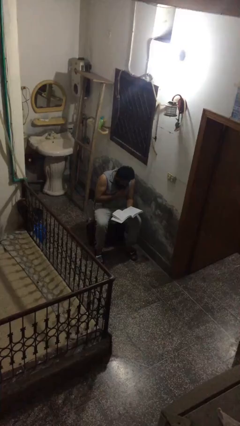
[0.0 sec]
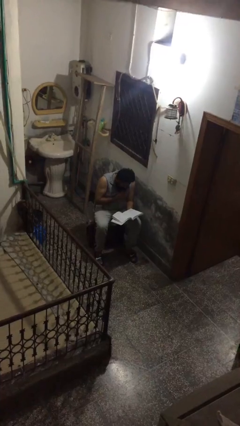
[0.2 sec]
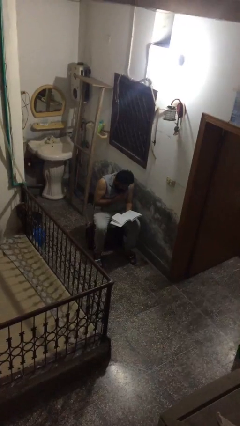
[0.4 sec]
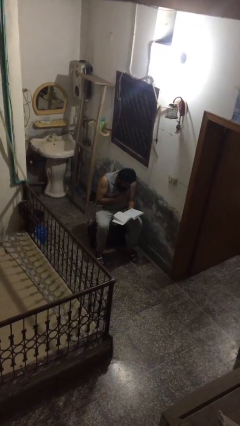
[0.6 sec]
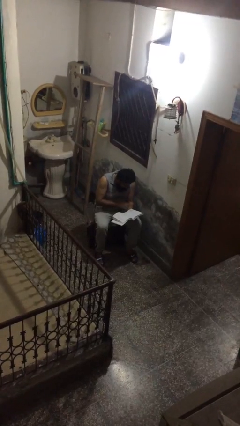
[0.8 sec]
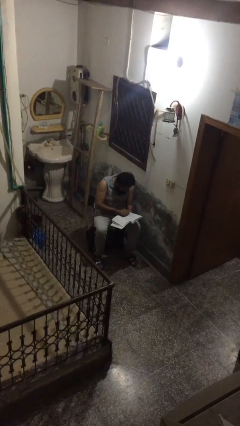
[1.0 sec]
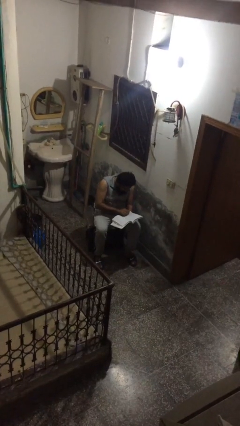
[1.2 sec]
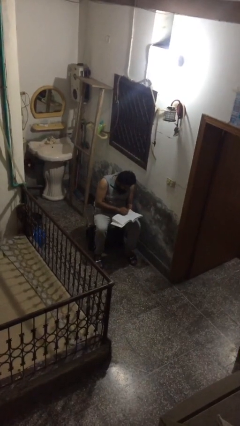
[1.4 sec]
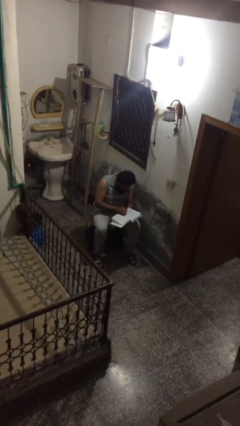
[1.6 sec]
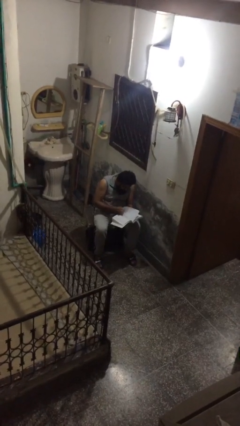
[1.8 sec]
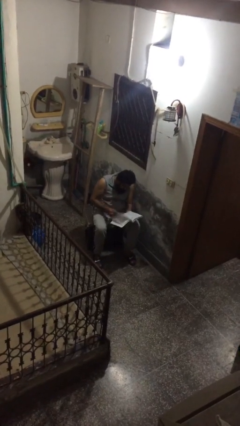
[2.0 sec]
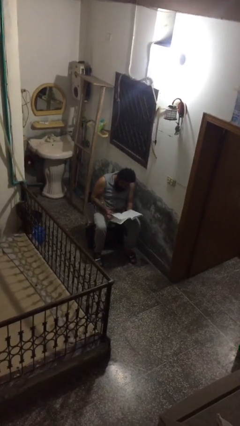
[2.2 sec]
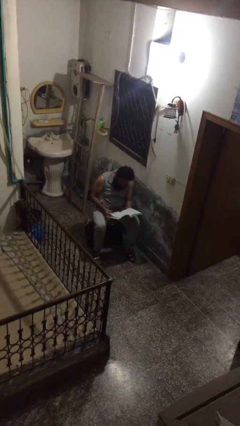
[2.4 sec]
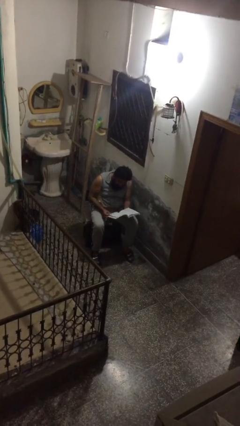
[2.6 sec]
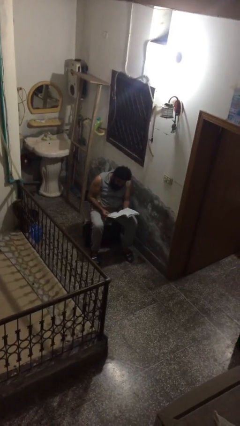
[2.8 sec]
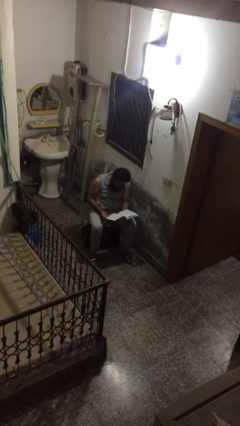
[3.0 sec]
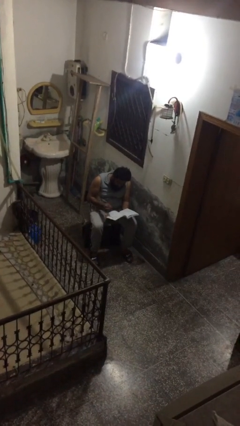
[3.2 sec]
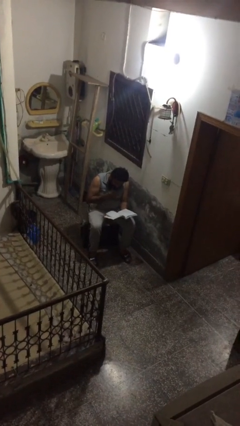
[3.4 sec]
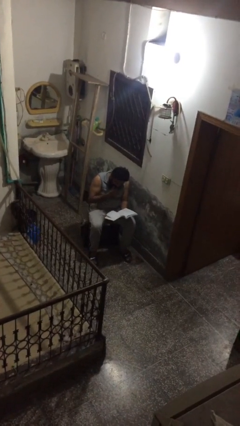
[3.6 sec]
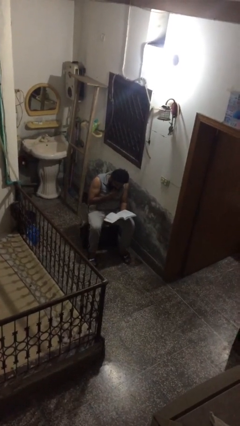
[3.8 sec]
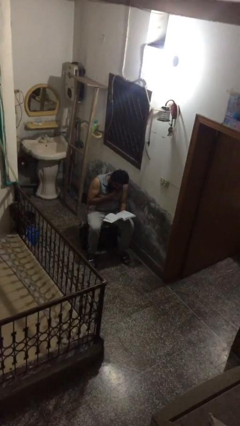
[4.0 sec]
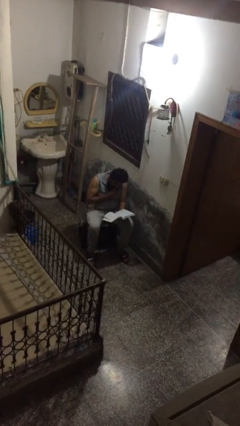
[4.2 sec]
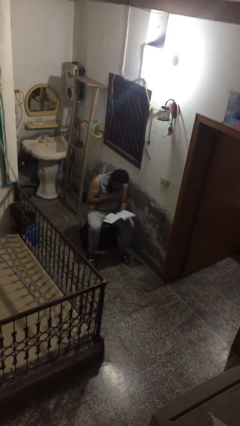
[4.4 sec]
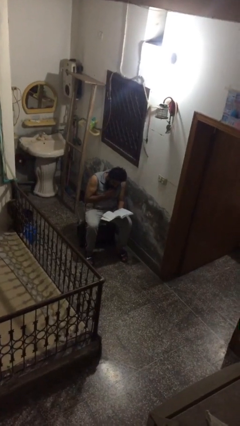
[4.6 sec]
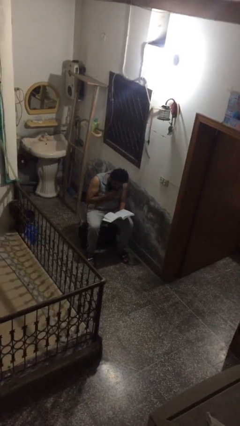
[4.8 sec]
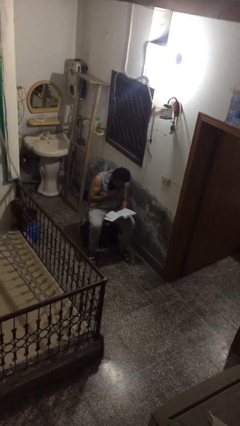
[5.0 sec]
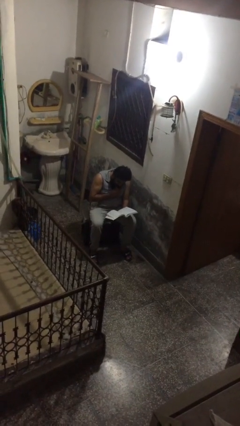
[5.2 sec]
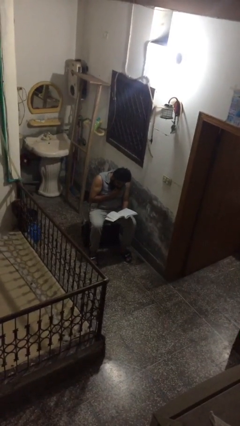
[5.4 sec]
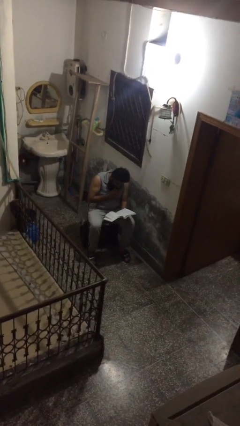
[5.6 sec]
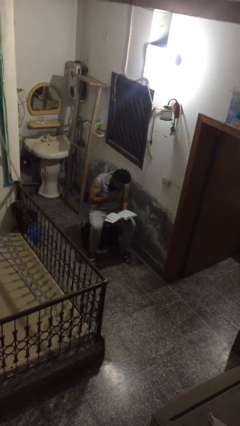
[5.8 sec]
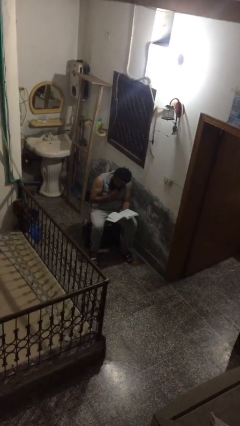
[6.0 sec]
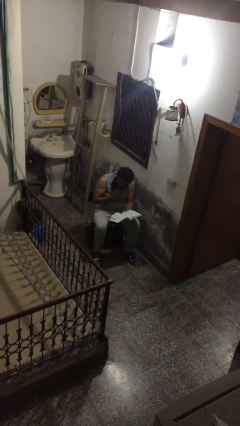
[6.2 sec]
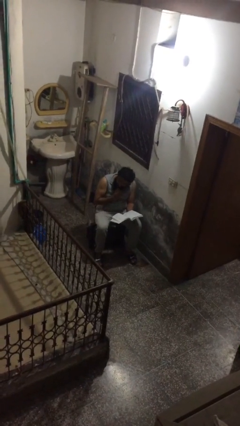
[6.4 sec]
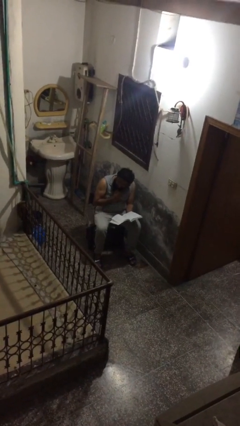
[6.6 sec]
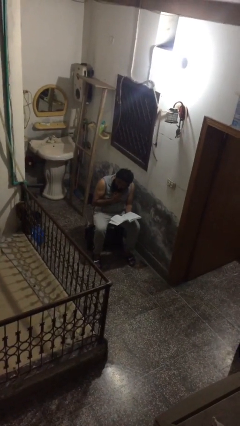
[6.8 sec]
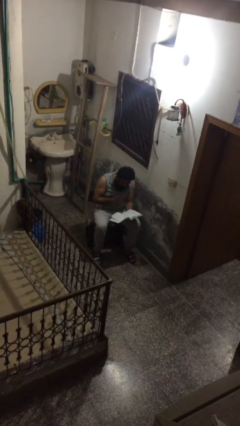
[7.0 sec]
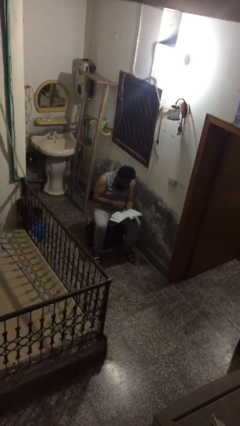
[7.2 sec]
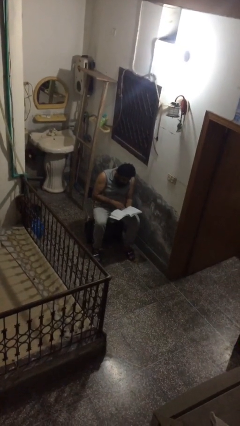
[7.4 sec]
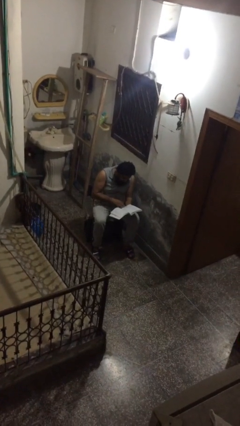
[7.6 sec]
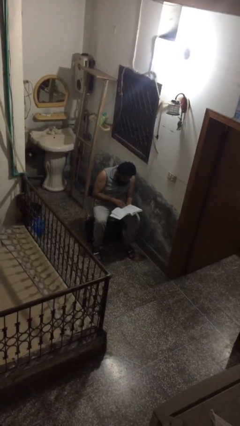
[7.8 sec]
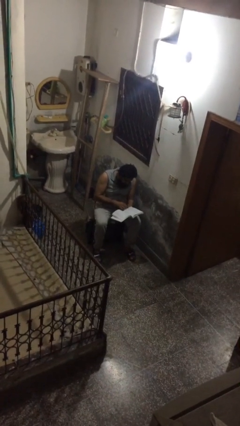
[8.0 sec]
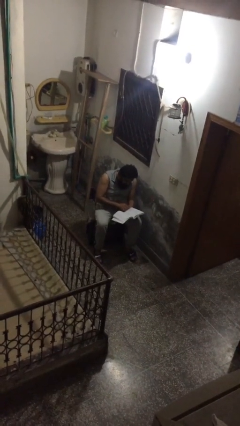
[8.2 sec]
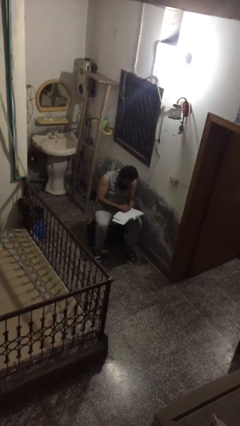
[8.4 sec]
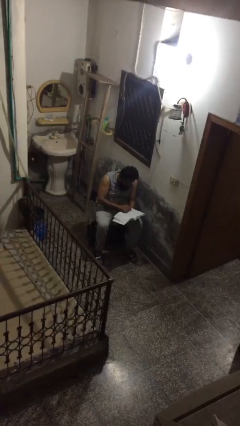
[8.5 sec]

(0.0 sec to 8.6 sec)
person reads document

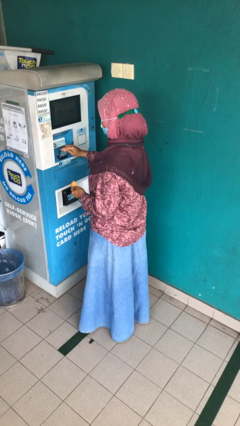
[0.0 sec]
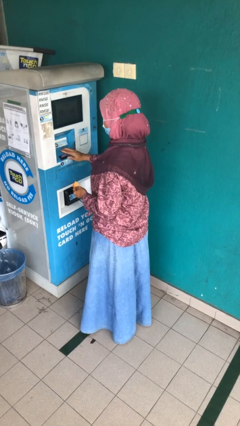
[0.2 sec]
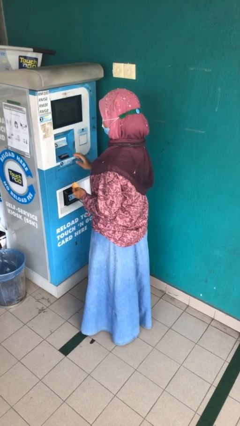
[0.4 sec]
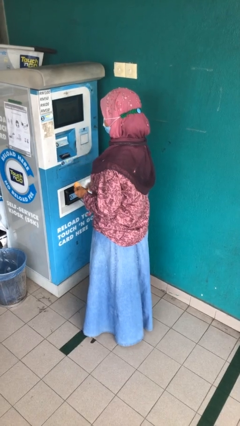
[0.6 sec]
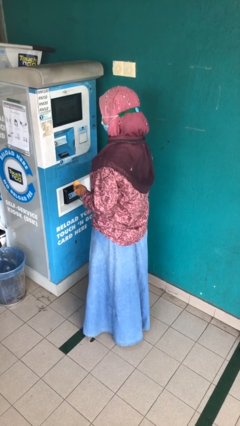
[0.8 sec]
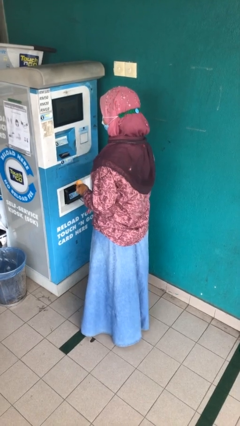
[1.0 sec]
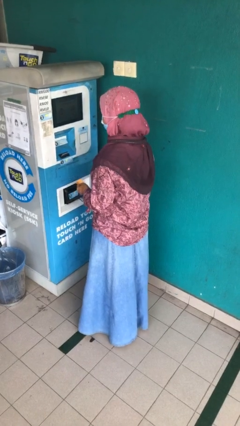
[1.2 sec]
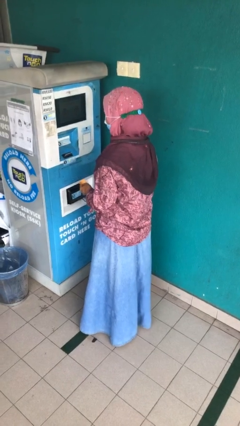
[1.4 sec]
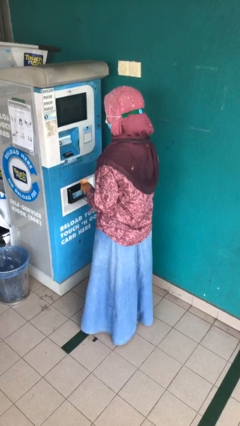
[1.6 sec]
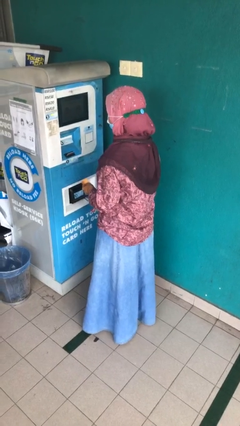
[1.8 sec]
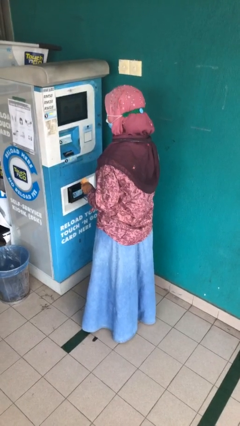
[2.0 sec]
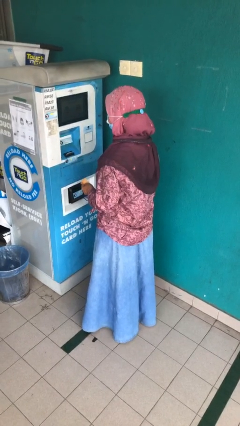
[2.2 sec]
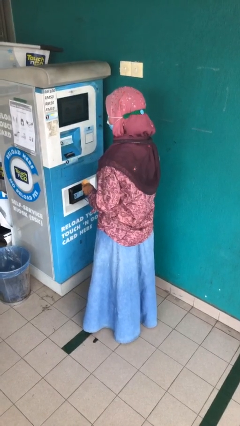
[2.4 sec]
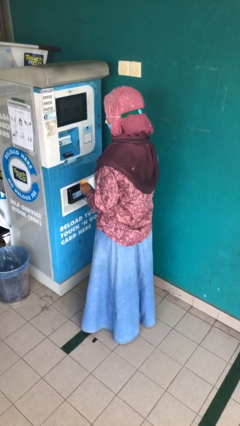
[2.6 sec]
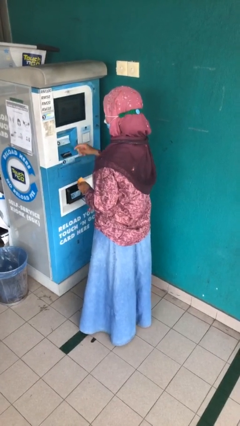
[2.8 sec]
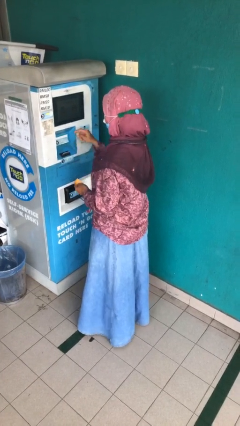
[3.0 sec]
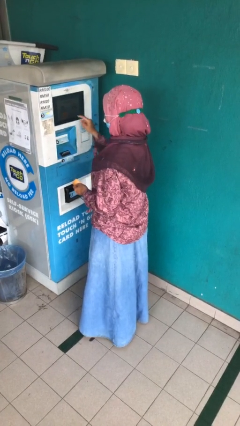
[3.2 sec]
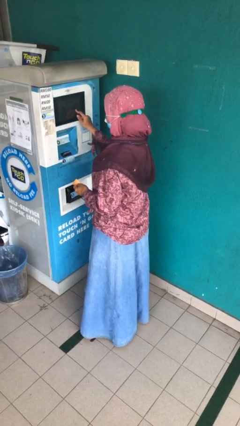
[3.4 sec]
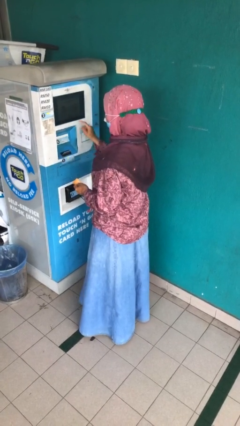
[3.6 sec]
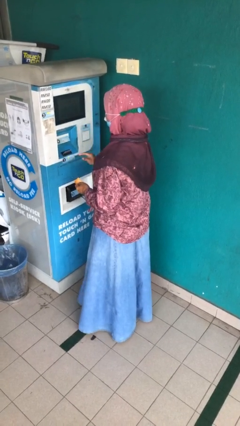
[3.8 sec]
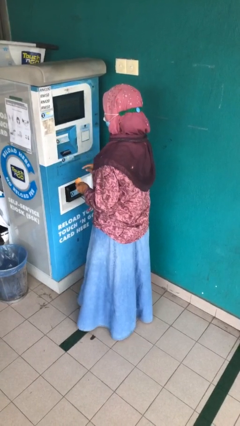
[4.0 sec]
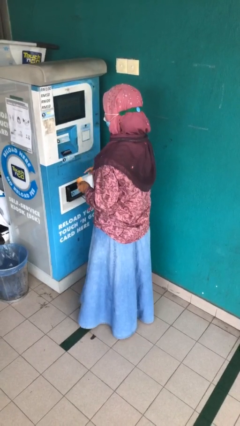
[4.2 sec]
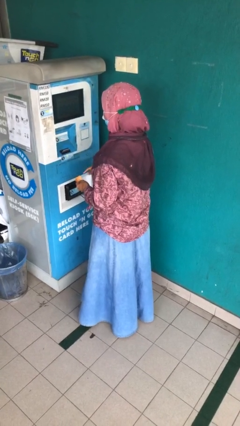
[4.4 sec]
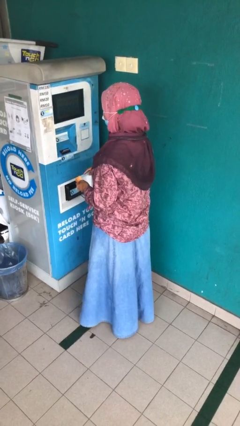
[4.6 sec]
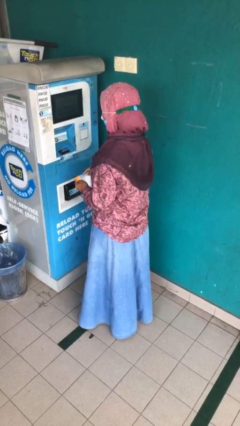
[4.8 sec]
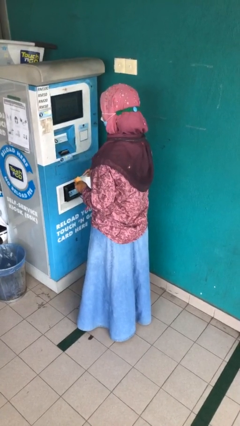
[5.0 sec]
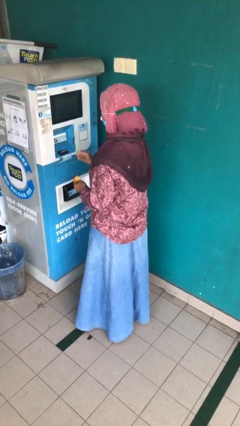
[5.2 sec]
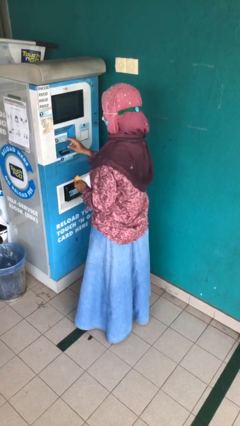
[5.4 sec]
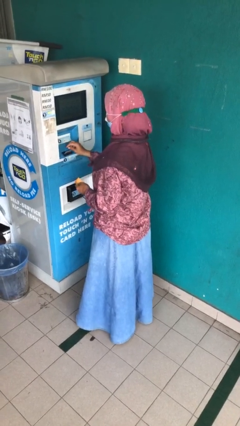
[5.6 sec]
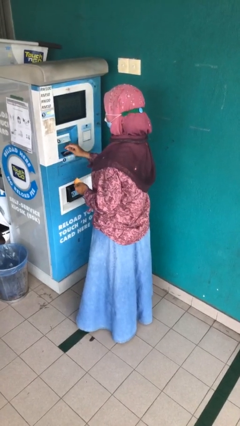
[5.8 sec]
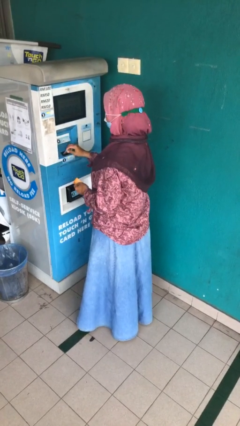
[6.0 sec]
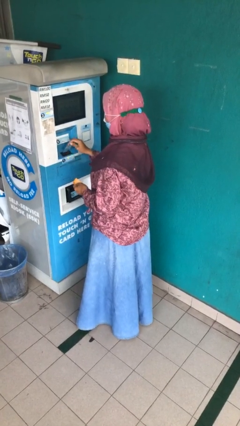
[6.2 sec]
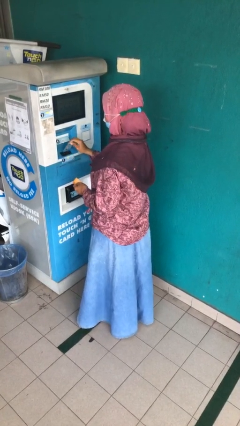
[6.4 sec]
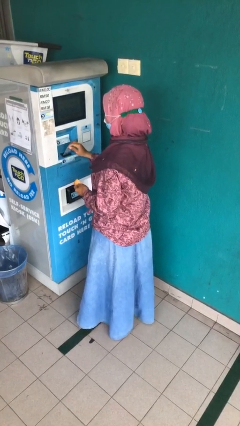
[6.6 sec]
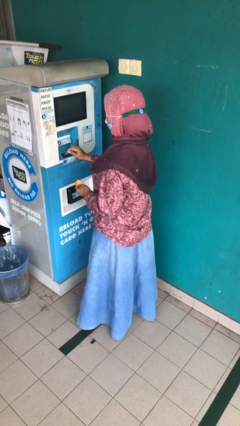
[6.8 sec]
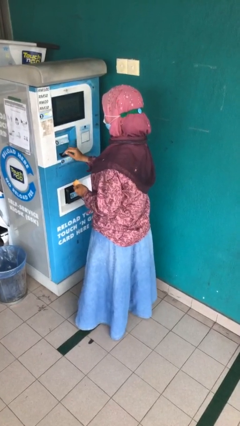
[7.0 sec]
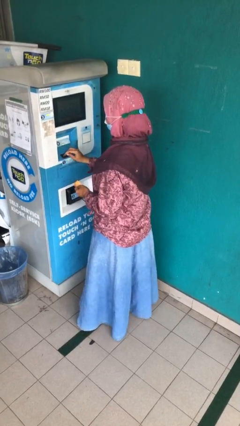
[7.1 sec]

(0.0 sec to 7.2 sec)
person purchases from machine

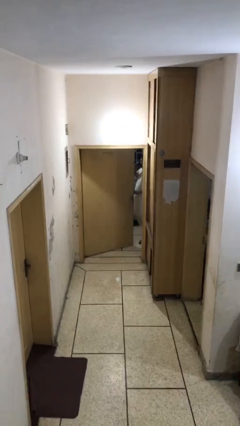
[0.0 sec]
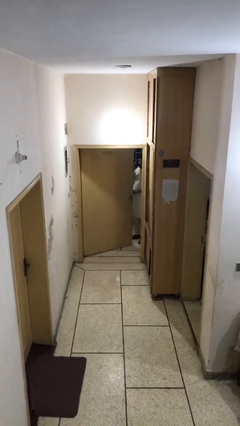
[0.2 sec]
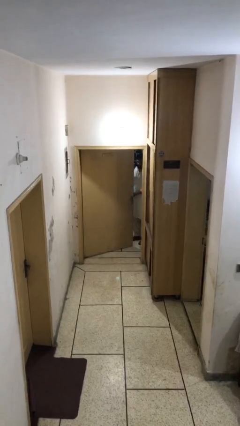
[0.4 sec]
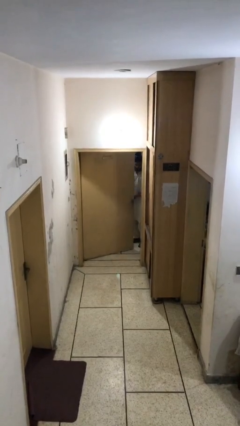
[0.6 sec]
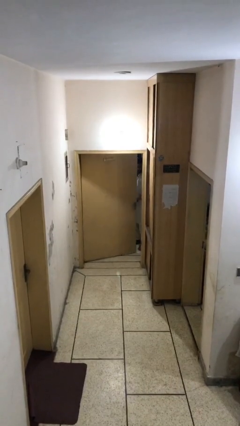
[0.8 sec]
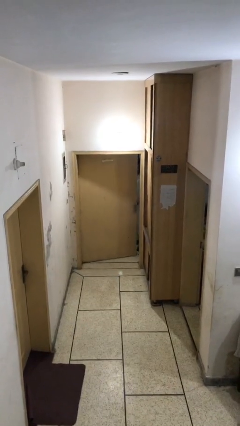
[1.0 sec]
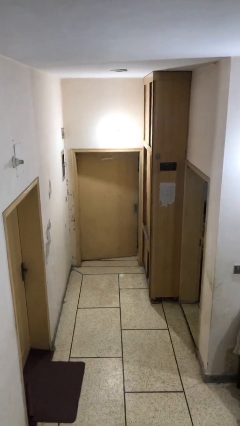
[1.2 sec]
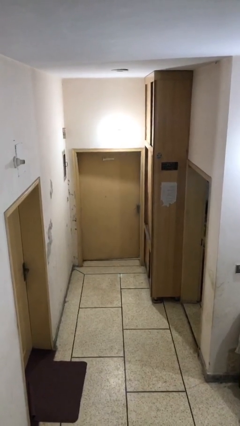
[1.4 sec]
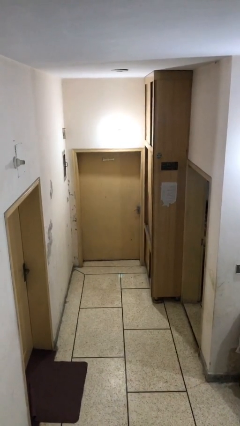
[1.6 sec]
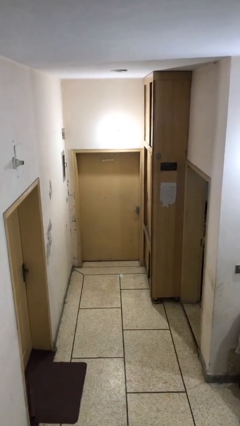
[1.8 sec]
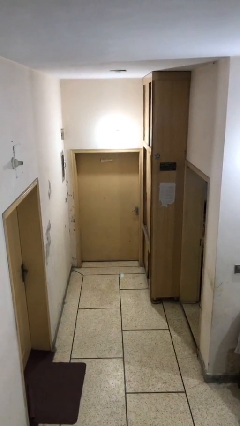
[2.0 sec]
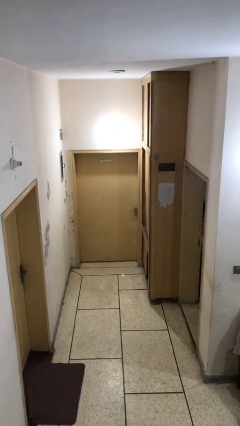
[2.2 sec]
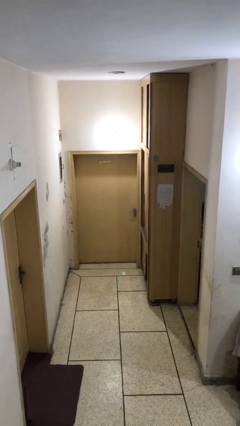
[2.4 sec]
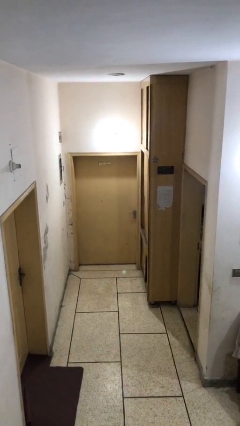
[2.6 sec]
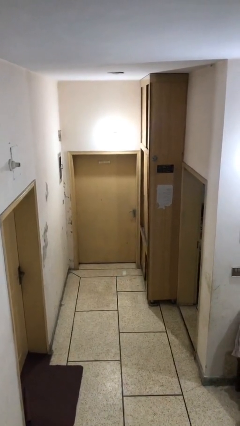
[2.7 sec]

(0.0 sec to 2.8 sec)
person closes facility door
